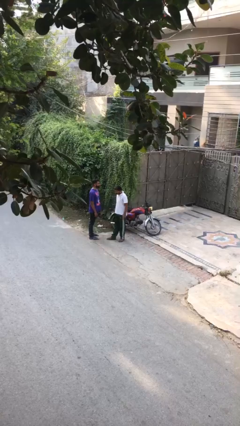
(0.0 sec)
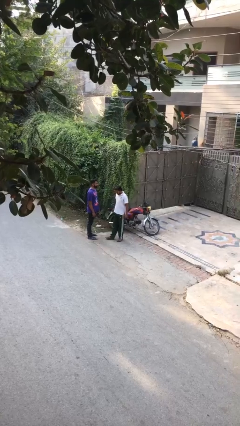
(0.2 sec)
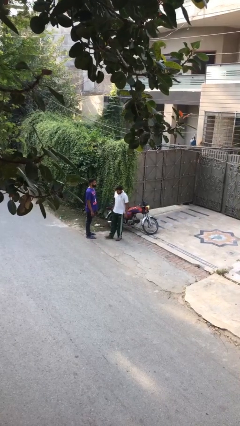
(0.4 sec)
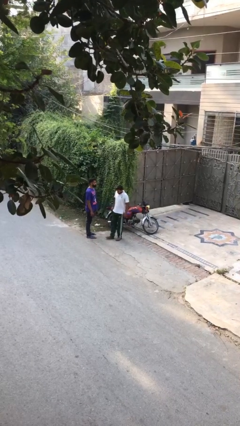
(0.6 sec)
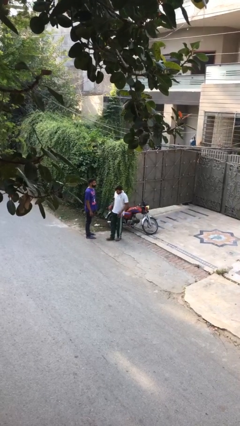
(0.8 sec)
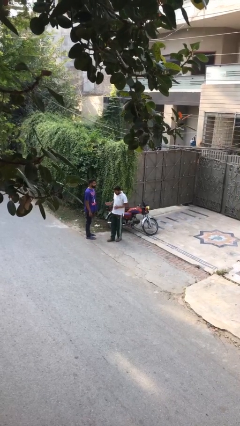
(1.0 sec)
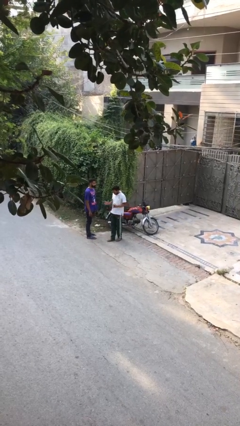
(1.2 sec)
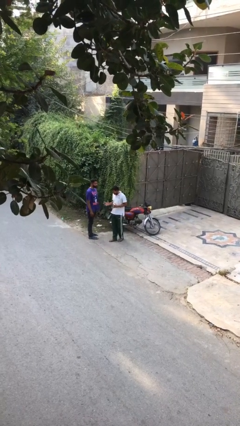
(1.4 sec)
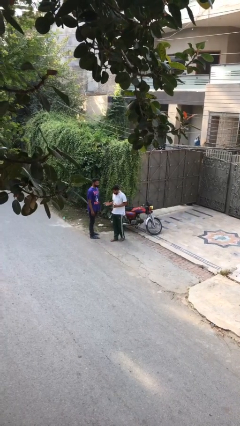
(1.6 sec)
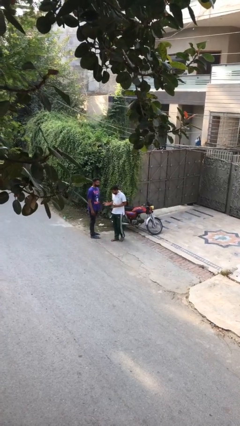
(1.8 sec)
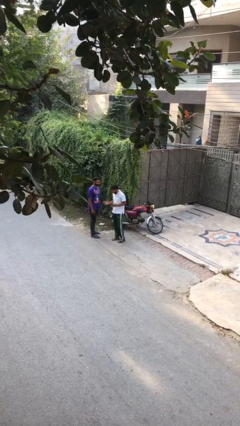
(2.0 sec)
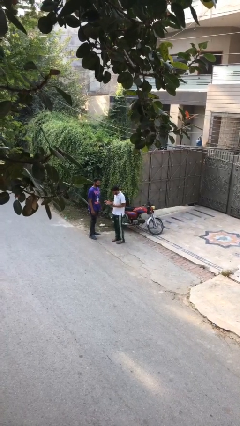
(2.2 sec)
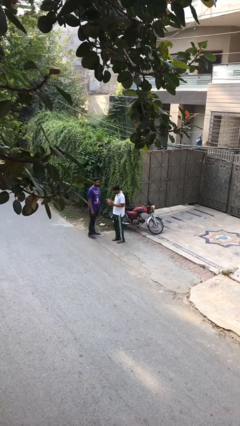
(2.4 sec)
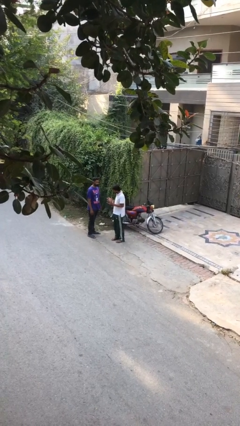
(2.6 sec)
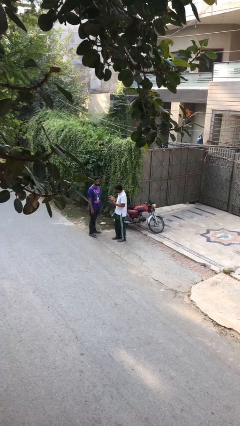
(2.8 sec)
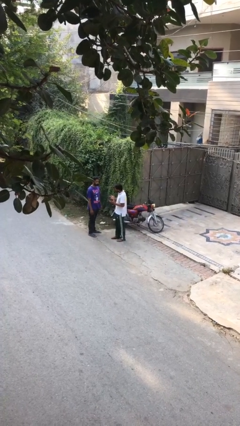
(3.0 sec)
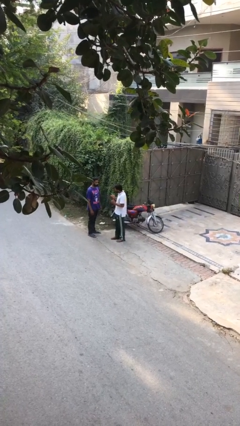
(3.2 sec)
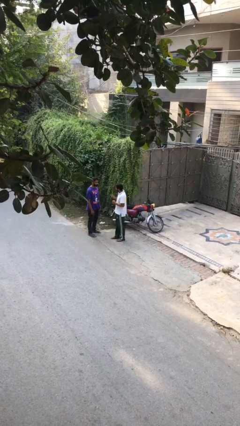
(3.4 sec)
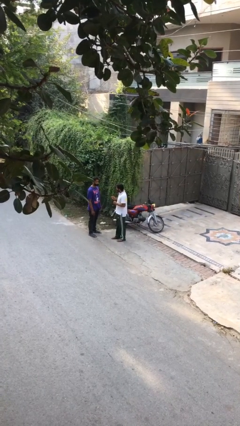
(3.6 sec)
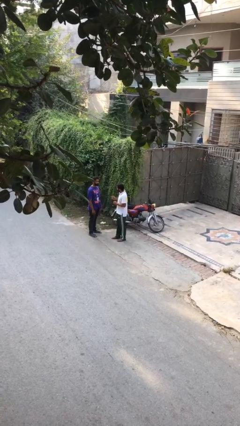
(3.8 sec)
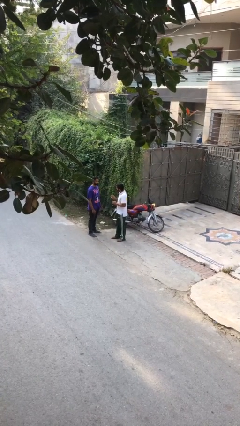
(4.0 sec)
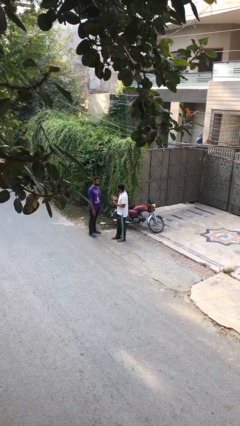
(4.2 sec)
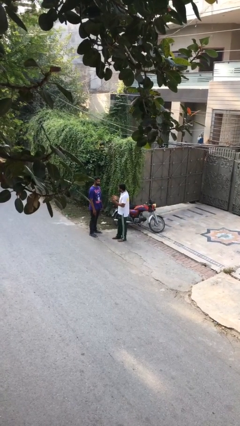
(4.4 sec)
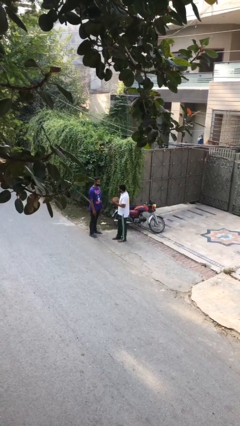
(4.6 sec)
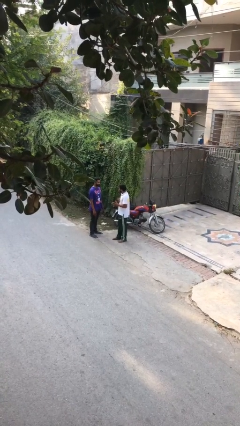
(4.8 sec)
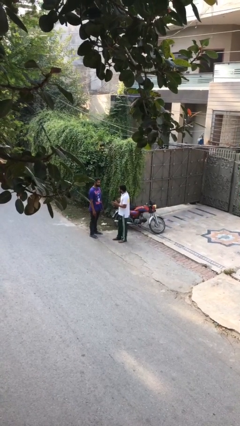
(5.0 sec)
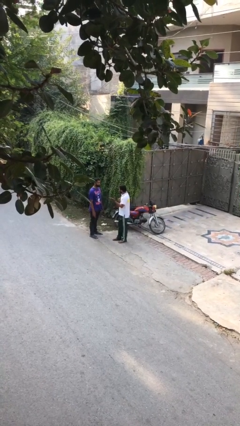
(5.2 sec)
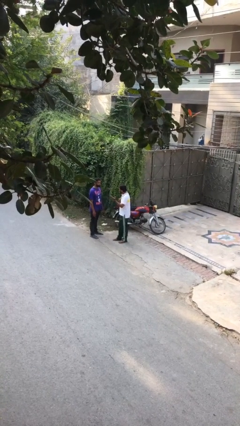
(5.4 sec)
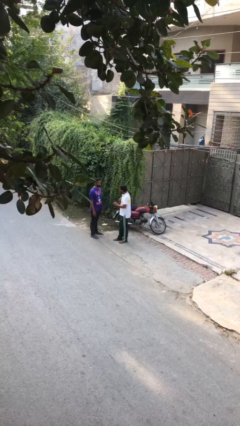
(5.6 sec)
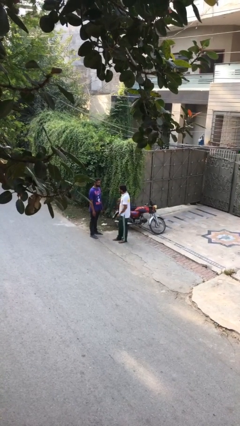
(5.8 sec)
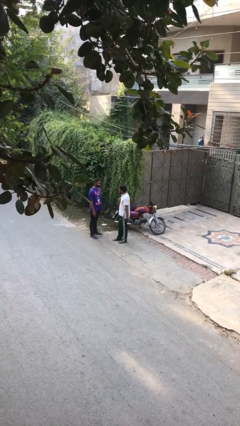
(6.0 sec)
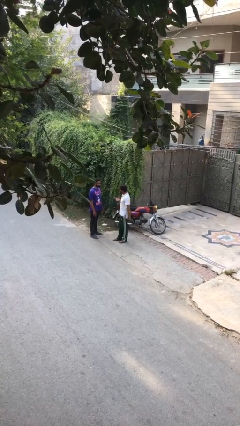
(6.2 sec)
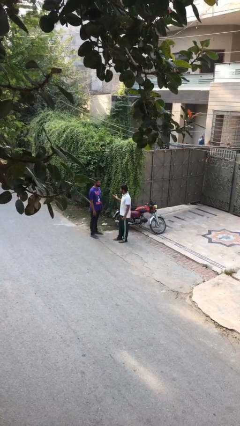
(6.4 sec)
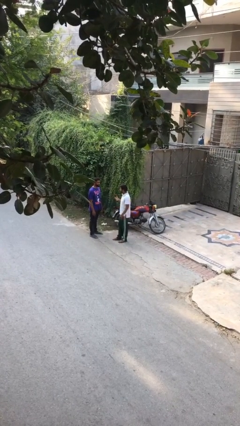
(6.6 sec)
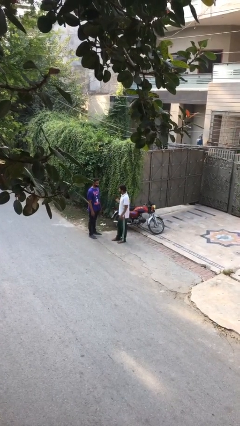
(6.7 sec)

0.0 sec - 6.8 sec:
person talks to person

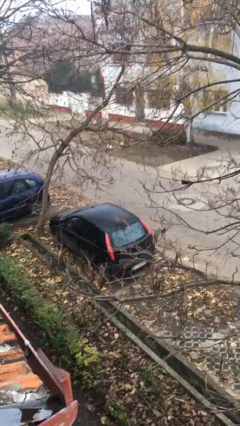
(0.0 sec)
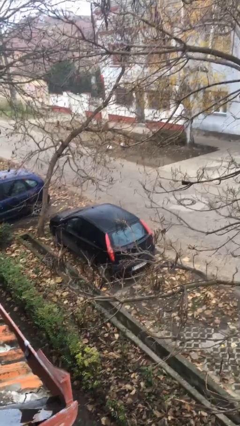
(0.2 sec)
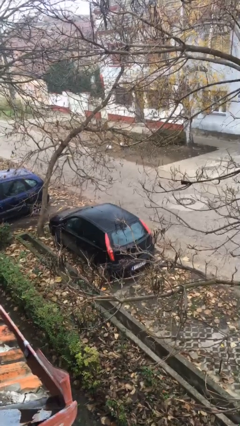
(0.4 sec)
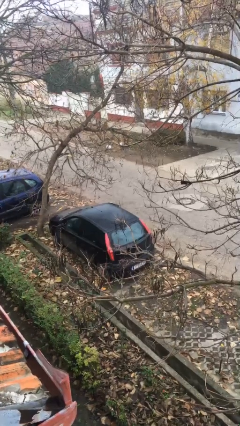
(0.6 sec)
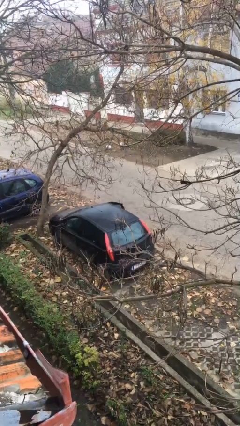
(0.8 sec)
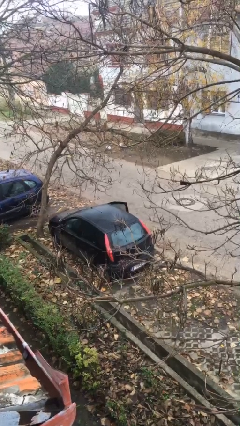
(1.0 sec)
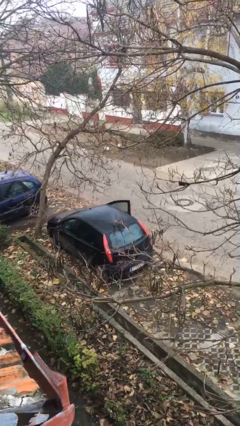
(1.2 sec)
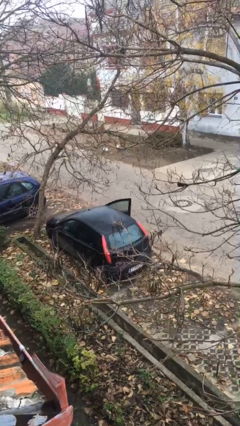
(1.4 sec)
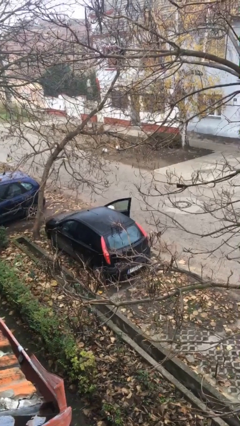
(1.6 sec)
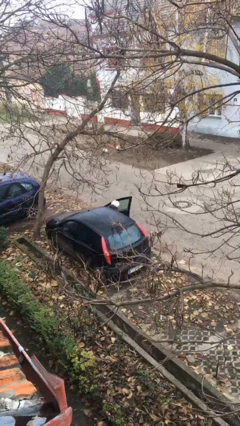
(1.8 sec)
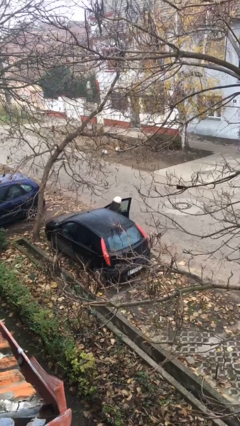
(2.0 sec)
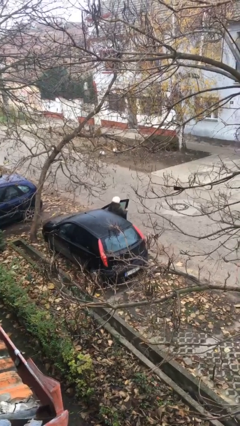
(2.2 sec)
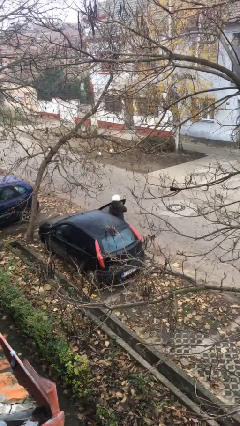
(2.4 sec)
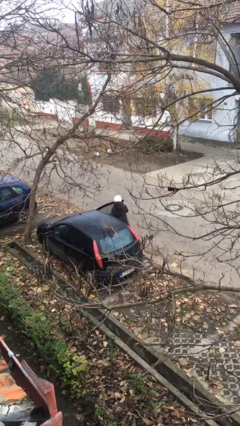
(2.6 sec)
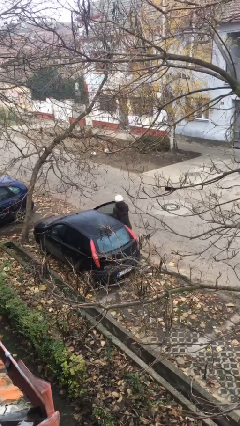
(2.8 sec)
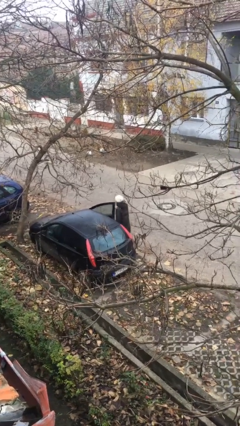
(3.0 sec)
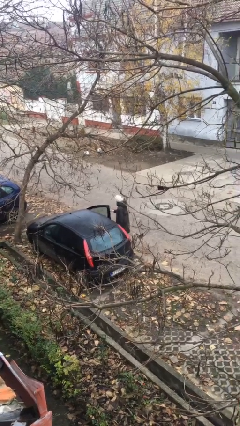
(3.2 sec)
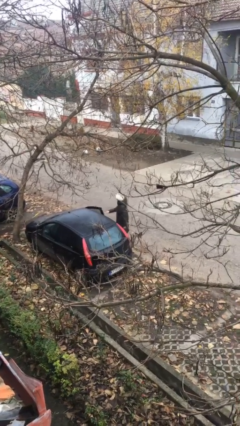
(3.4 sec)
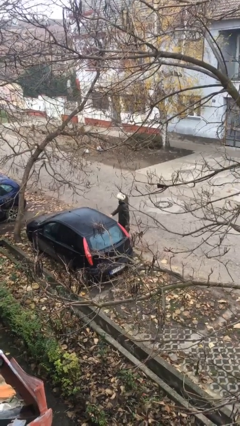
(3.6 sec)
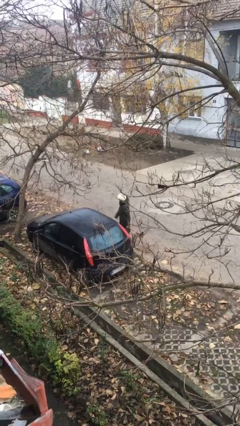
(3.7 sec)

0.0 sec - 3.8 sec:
person exits car

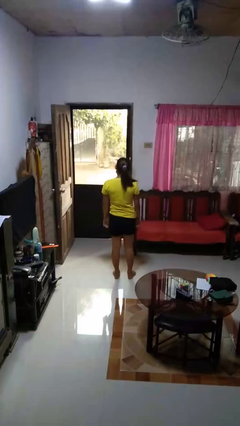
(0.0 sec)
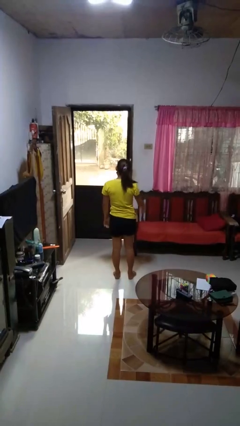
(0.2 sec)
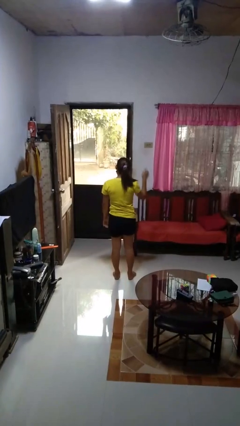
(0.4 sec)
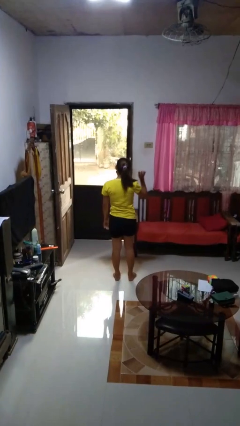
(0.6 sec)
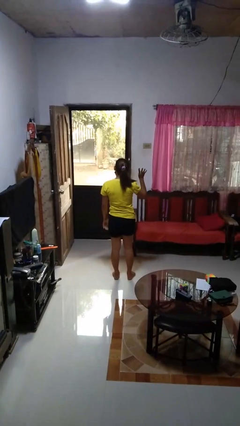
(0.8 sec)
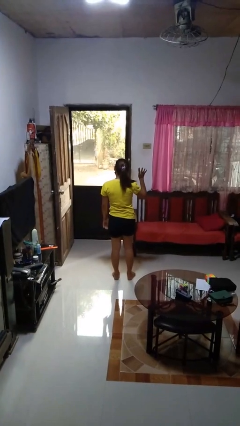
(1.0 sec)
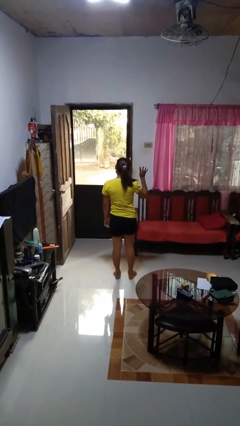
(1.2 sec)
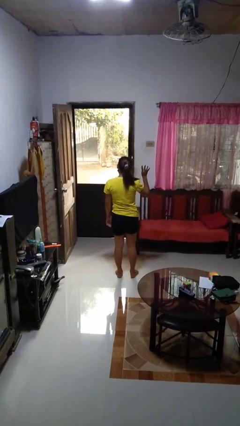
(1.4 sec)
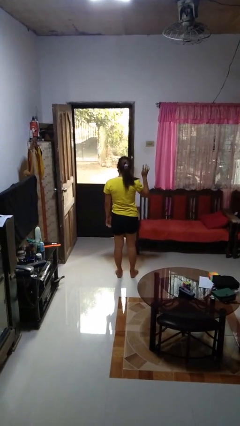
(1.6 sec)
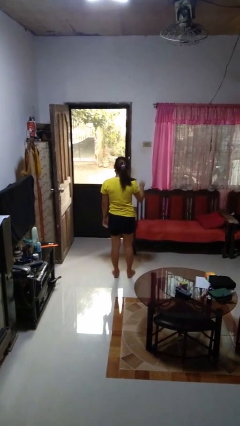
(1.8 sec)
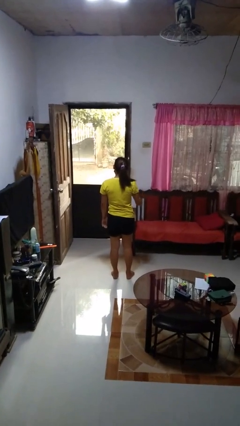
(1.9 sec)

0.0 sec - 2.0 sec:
person gestures number four

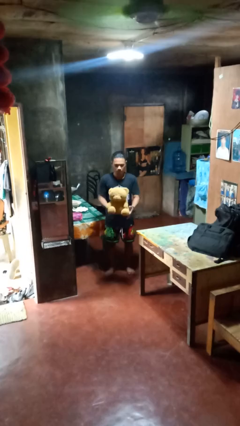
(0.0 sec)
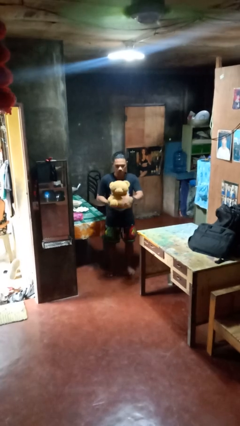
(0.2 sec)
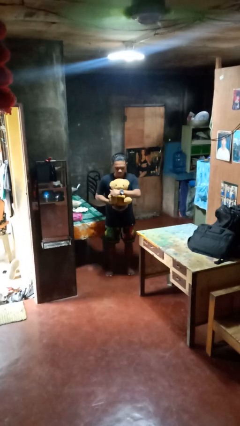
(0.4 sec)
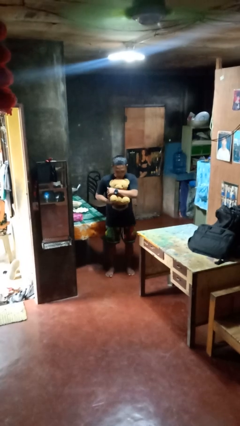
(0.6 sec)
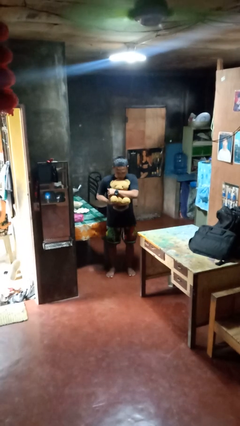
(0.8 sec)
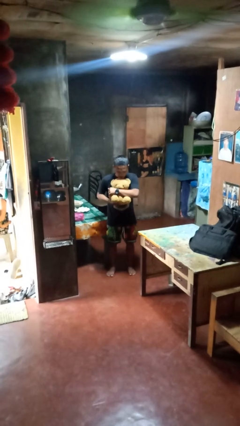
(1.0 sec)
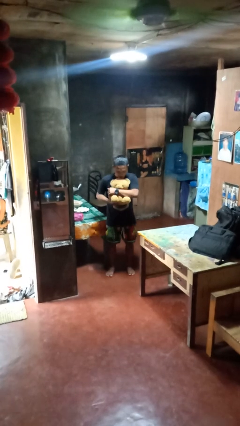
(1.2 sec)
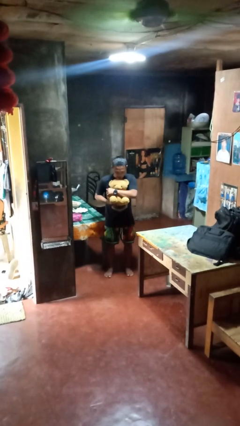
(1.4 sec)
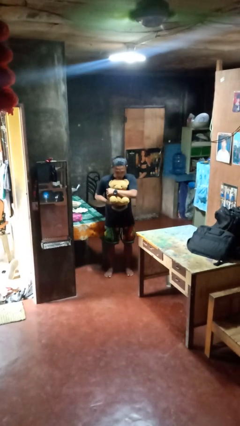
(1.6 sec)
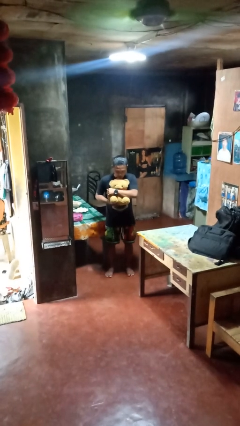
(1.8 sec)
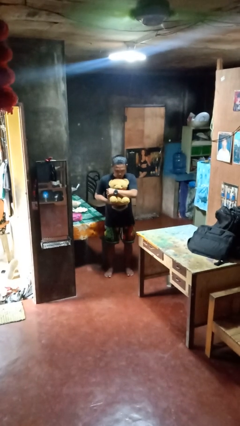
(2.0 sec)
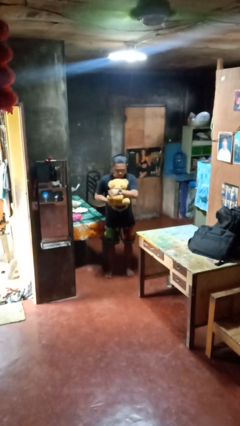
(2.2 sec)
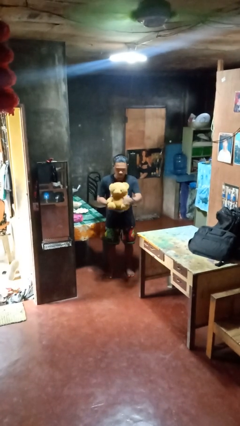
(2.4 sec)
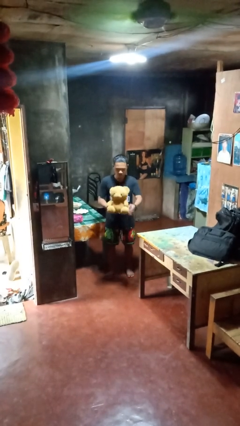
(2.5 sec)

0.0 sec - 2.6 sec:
person hugs stuffed animal

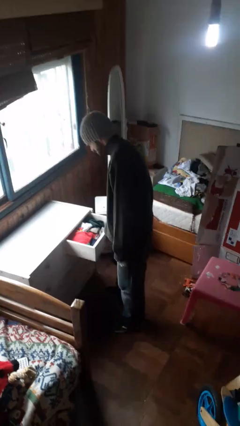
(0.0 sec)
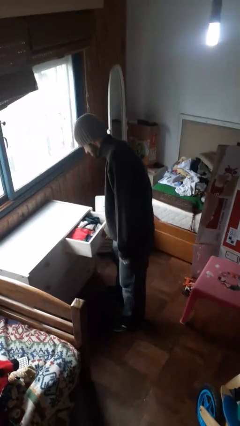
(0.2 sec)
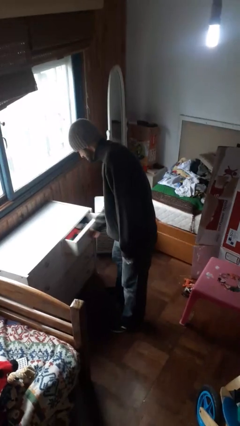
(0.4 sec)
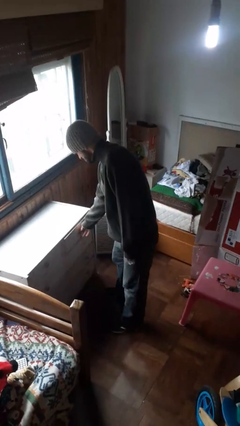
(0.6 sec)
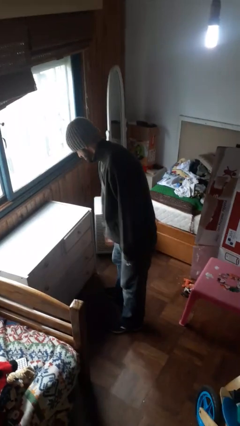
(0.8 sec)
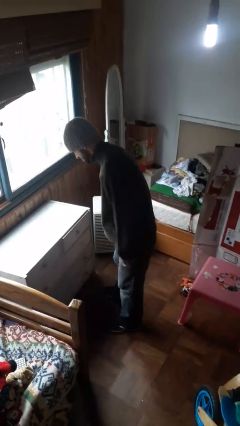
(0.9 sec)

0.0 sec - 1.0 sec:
person closes dresser drawer

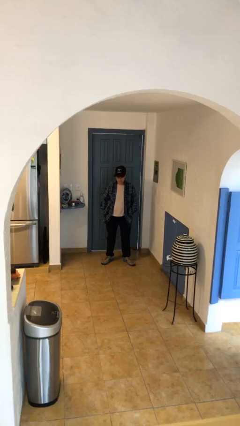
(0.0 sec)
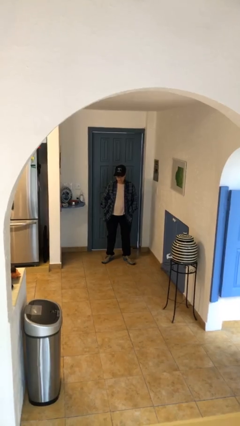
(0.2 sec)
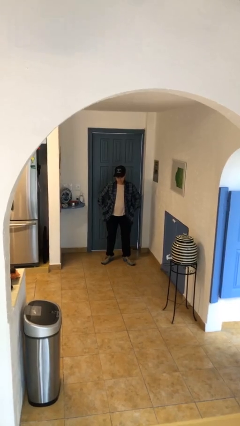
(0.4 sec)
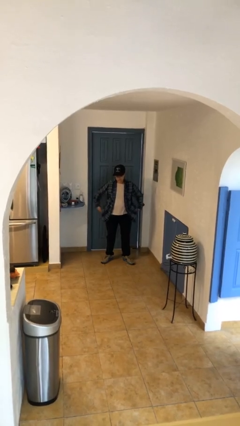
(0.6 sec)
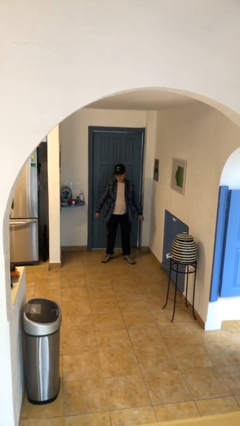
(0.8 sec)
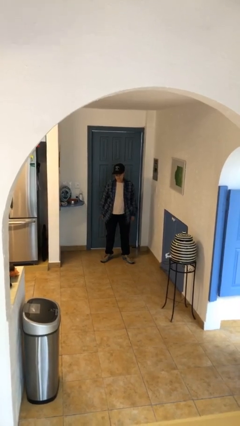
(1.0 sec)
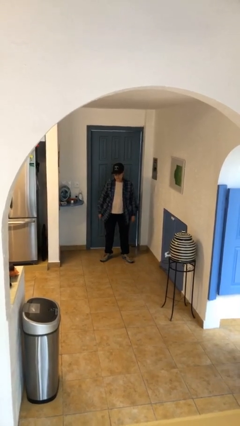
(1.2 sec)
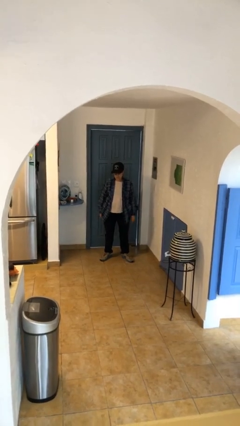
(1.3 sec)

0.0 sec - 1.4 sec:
person puts hands in back pockets
